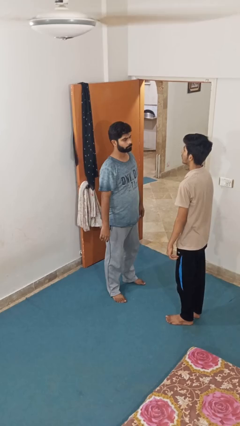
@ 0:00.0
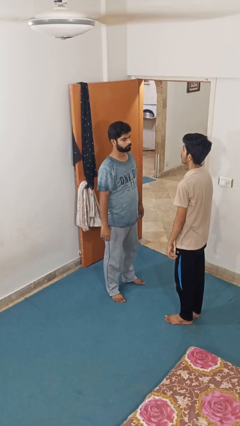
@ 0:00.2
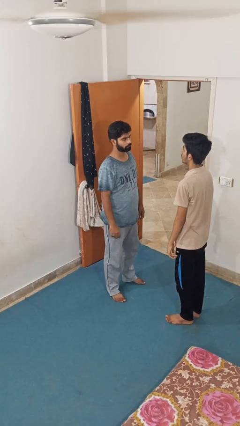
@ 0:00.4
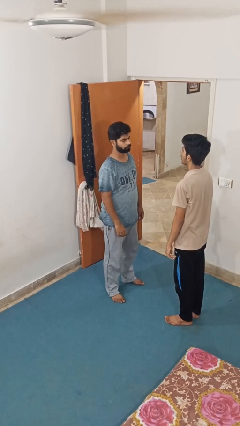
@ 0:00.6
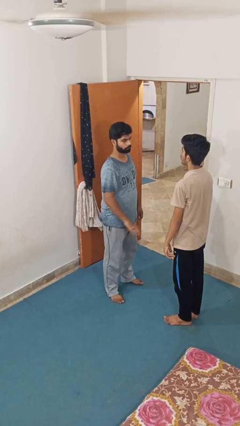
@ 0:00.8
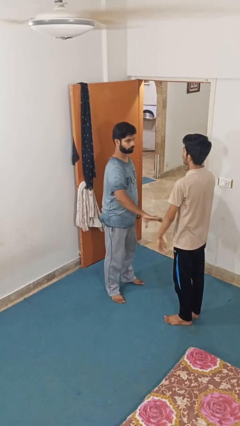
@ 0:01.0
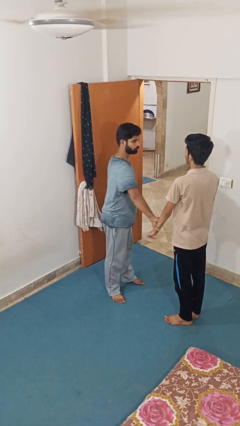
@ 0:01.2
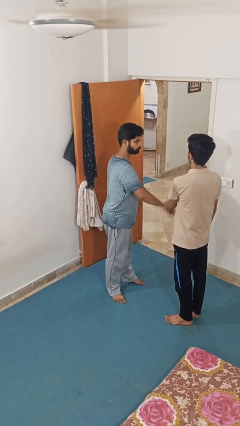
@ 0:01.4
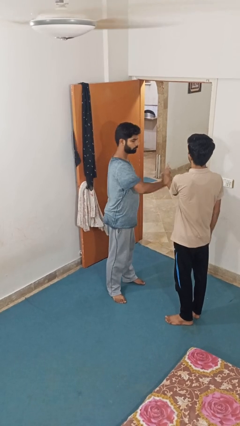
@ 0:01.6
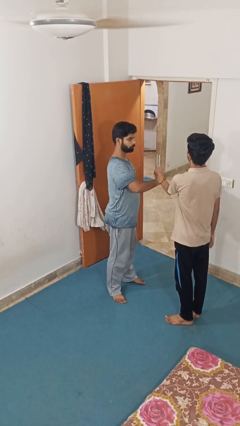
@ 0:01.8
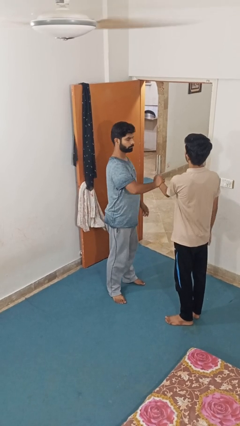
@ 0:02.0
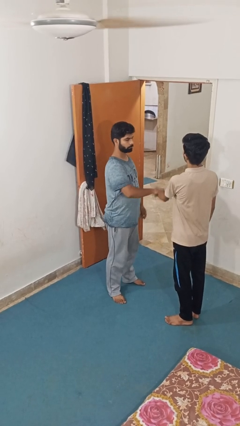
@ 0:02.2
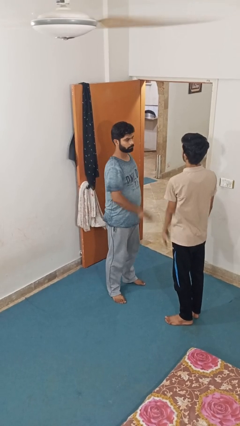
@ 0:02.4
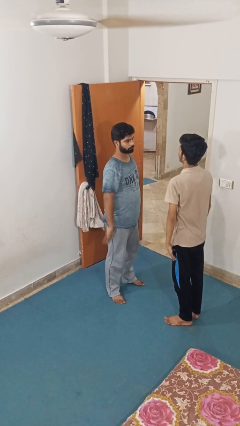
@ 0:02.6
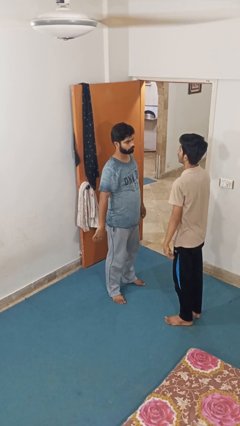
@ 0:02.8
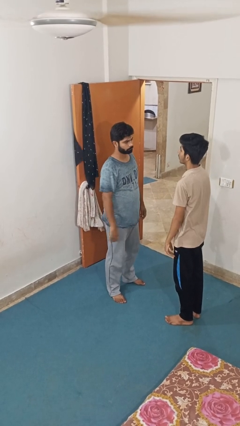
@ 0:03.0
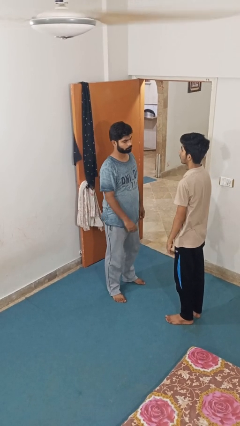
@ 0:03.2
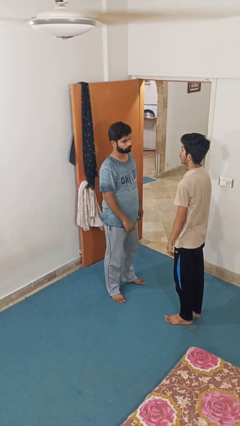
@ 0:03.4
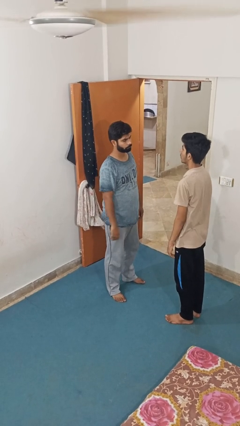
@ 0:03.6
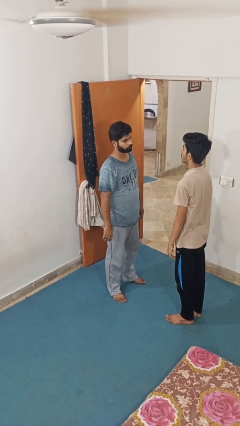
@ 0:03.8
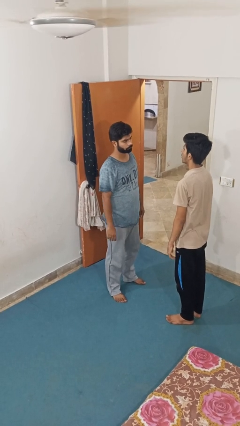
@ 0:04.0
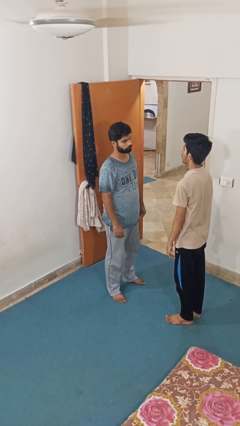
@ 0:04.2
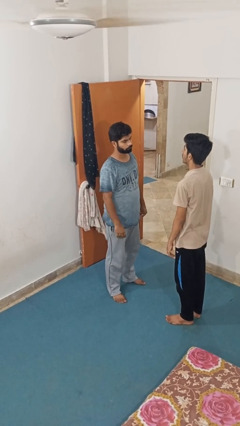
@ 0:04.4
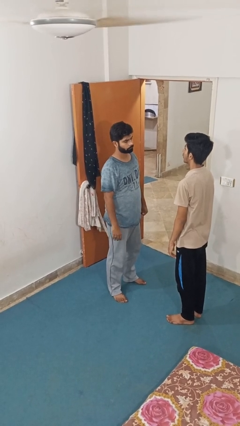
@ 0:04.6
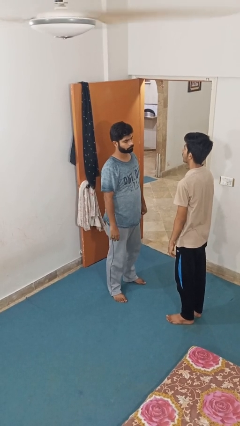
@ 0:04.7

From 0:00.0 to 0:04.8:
person grabs person by forearm

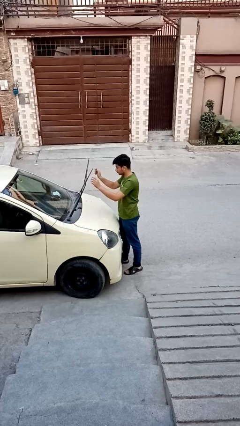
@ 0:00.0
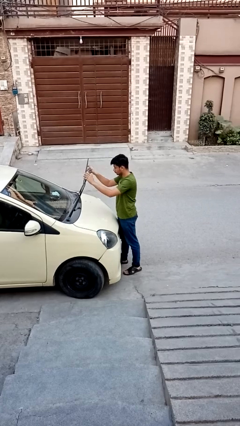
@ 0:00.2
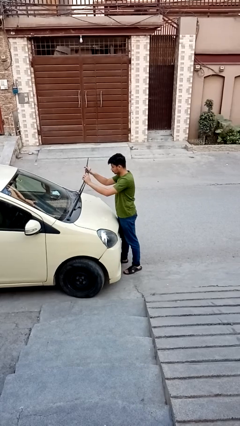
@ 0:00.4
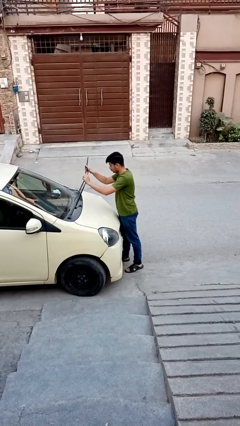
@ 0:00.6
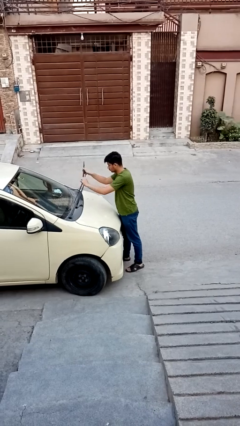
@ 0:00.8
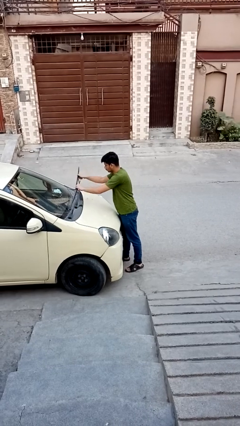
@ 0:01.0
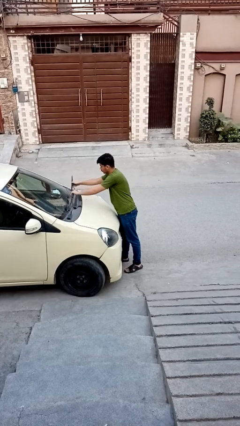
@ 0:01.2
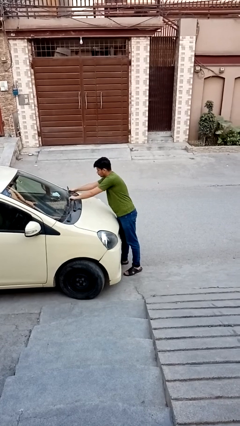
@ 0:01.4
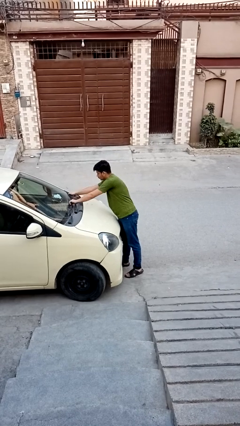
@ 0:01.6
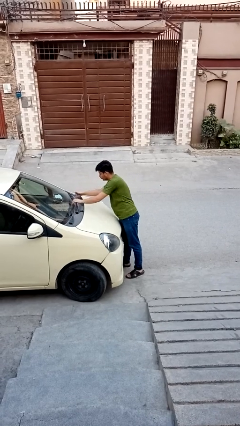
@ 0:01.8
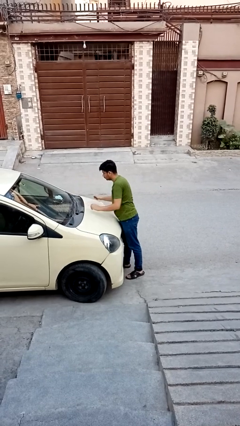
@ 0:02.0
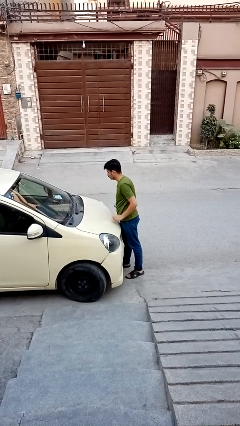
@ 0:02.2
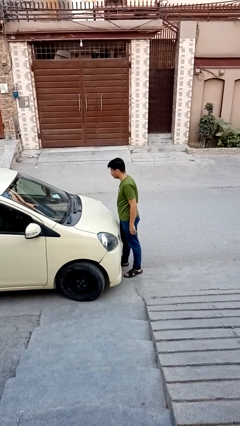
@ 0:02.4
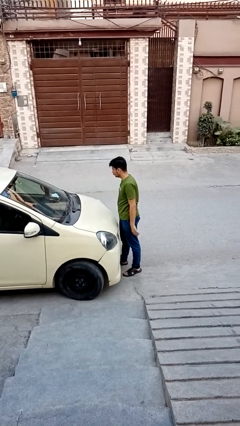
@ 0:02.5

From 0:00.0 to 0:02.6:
person flips down car wipers

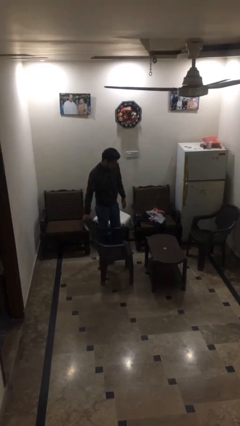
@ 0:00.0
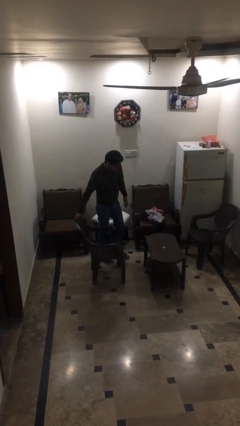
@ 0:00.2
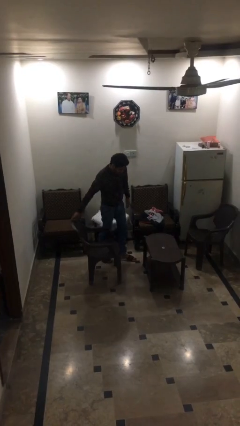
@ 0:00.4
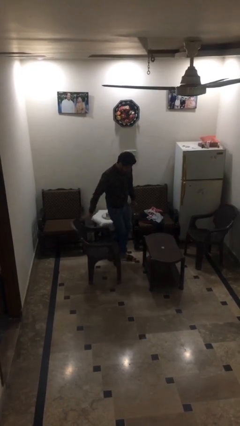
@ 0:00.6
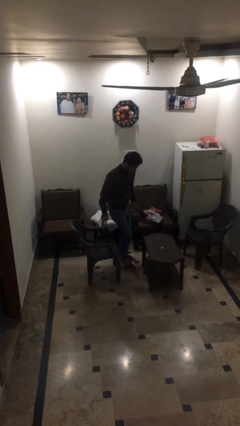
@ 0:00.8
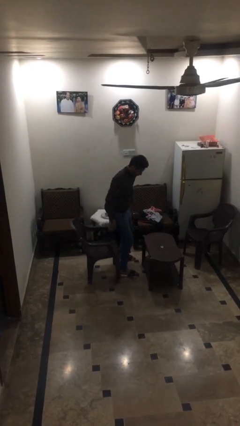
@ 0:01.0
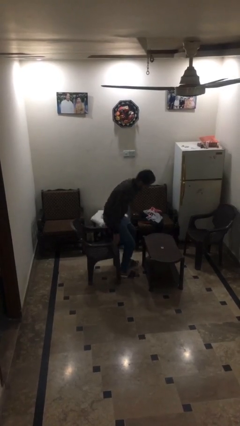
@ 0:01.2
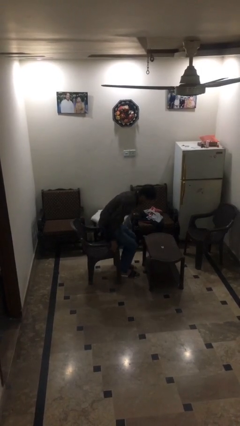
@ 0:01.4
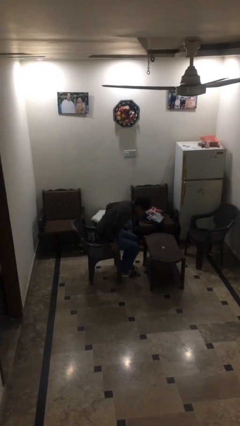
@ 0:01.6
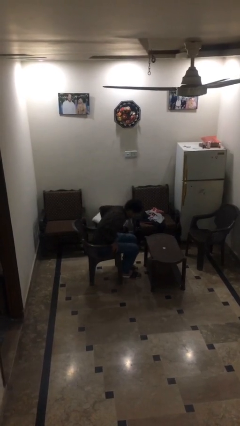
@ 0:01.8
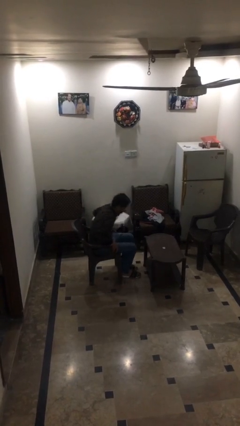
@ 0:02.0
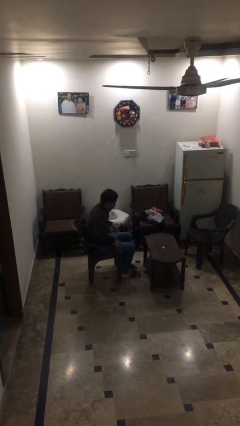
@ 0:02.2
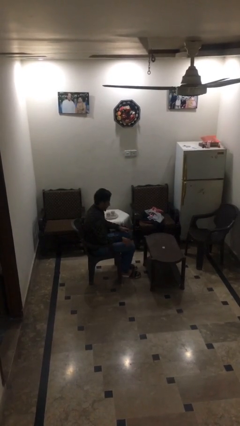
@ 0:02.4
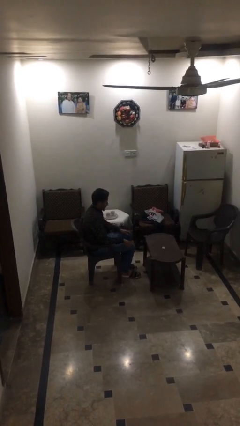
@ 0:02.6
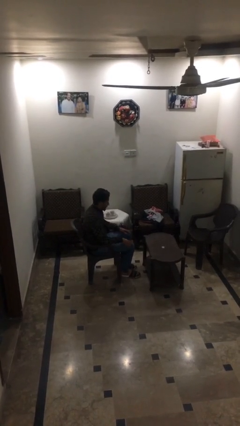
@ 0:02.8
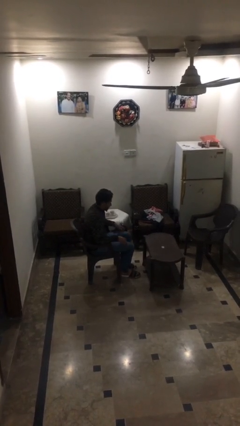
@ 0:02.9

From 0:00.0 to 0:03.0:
person sits down

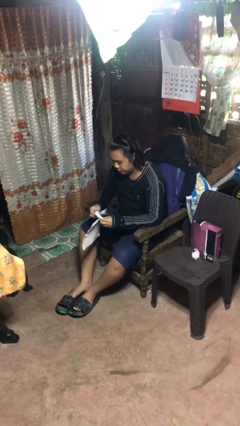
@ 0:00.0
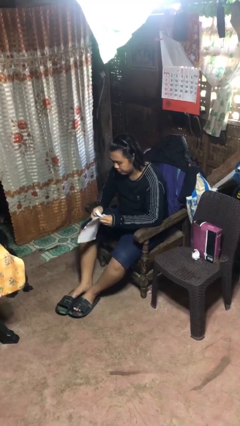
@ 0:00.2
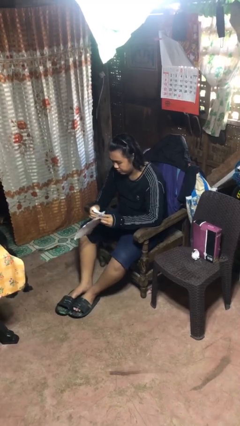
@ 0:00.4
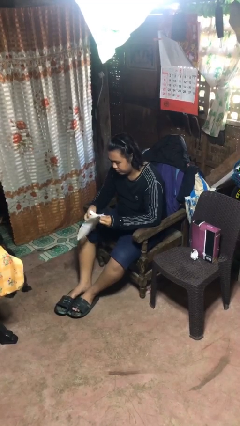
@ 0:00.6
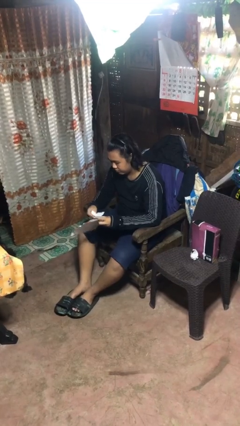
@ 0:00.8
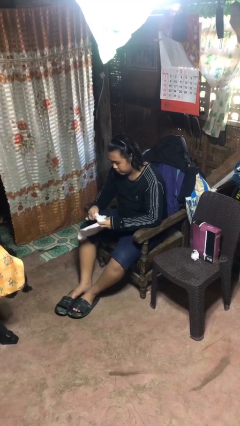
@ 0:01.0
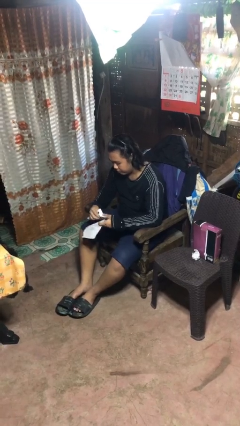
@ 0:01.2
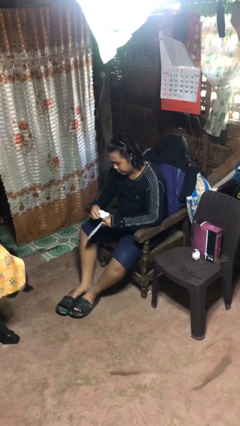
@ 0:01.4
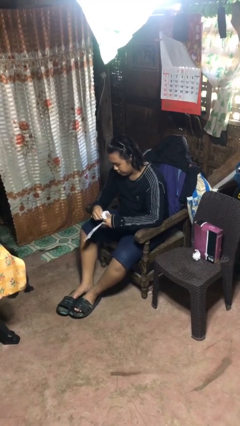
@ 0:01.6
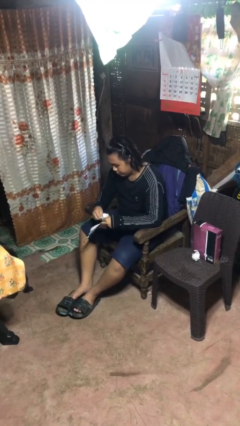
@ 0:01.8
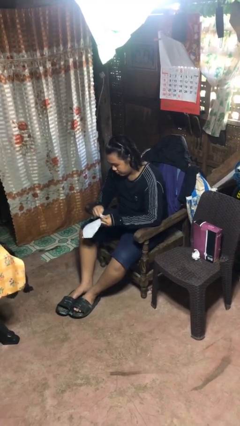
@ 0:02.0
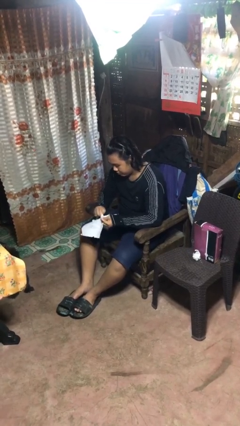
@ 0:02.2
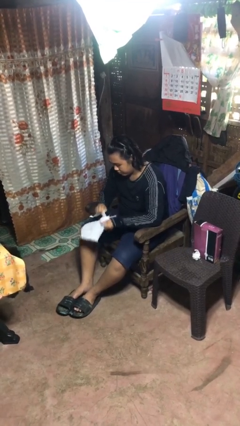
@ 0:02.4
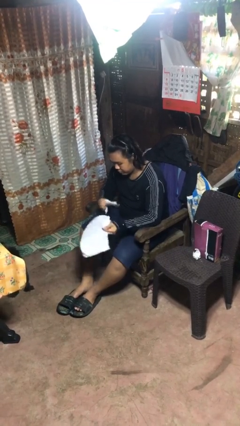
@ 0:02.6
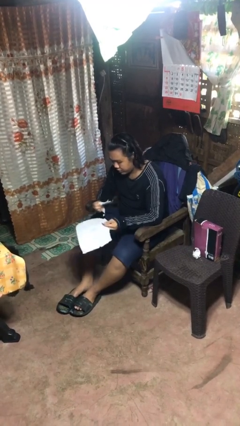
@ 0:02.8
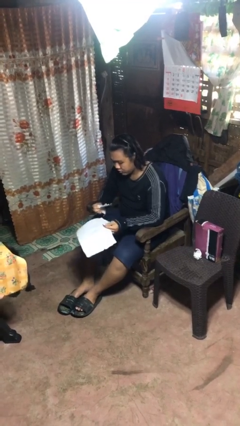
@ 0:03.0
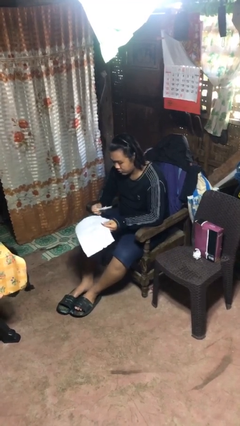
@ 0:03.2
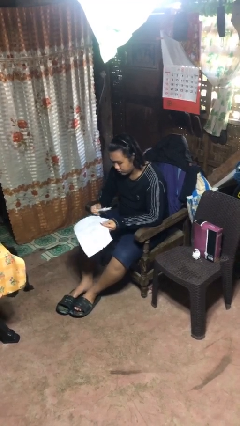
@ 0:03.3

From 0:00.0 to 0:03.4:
person tears paper

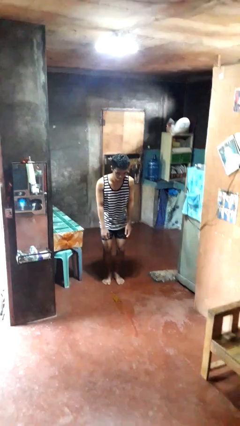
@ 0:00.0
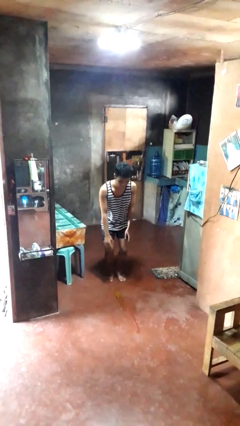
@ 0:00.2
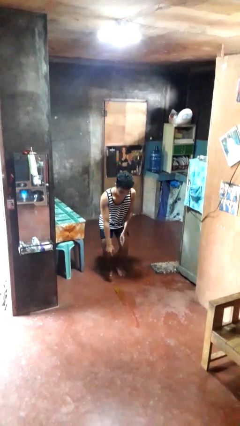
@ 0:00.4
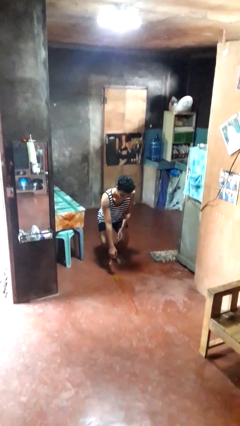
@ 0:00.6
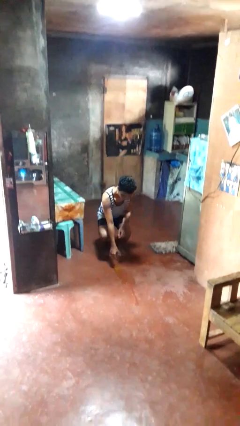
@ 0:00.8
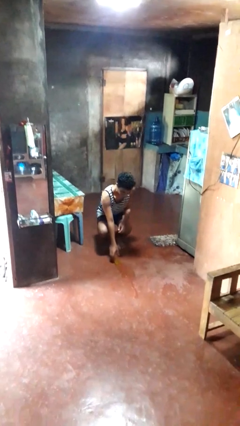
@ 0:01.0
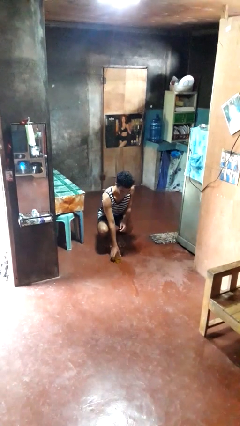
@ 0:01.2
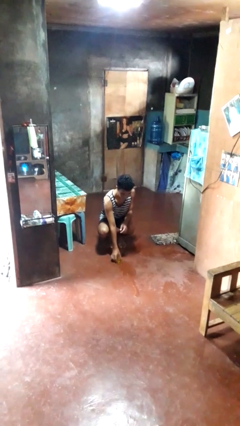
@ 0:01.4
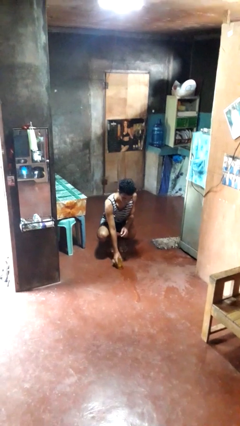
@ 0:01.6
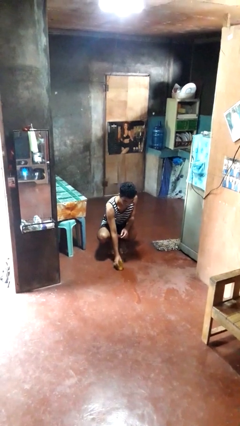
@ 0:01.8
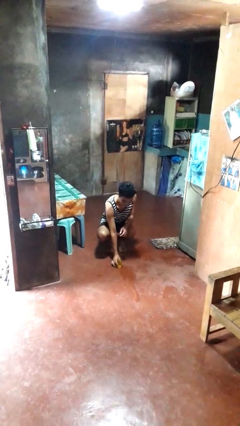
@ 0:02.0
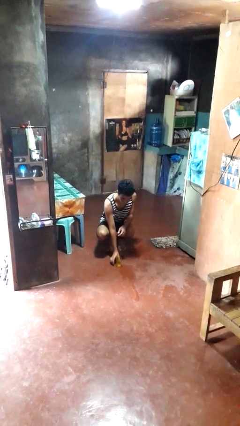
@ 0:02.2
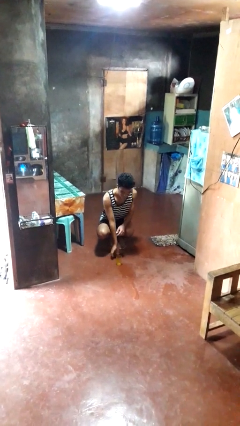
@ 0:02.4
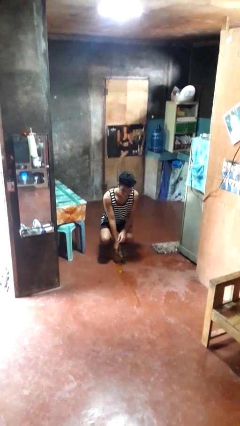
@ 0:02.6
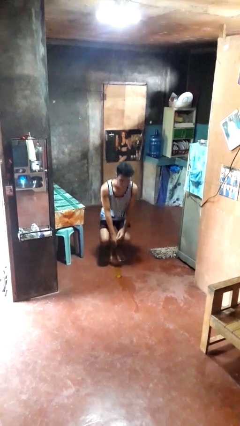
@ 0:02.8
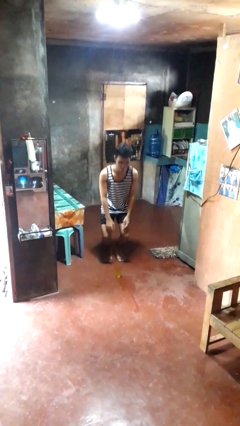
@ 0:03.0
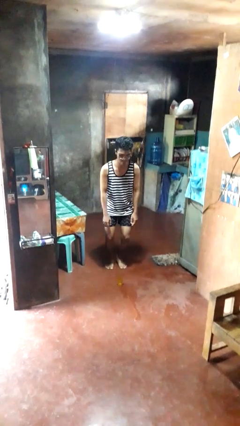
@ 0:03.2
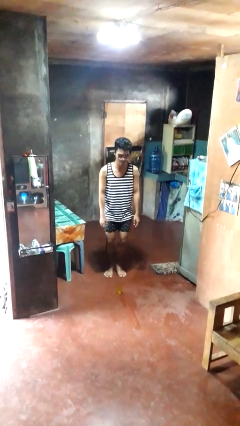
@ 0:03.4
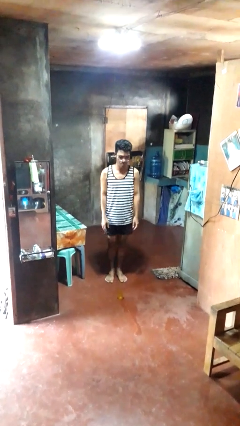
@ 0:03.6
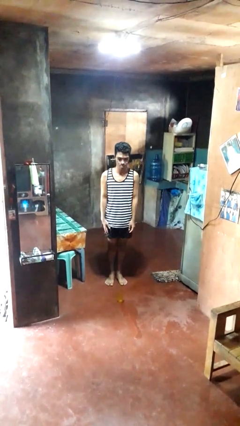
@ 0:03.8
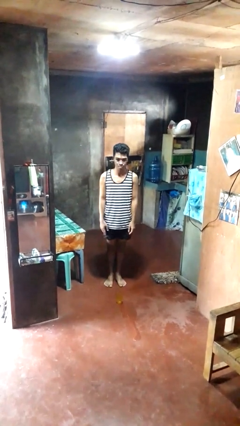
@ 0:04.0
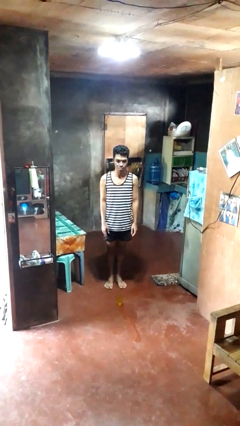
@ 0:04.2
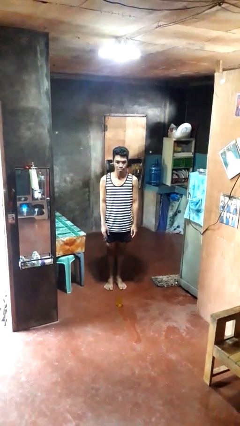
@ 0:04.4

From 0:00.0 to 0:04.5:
person sets upright glass
